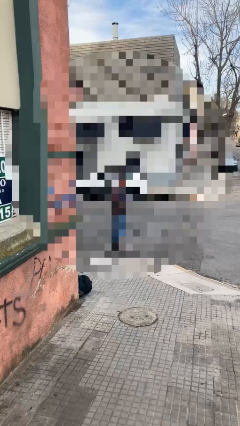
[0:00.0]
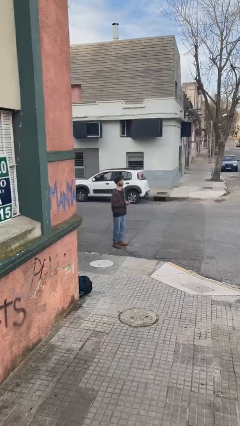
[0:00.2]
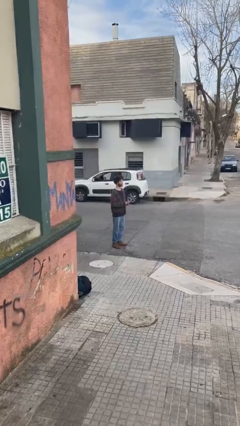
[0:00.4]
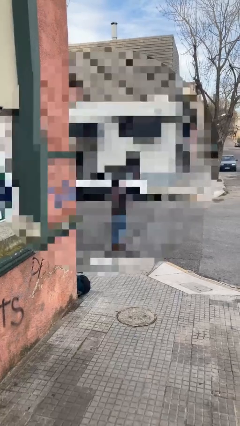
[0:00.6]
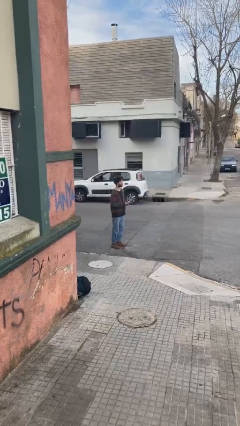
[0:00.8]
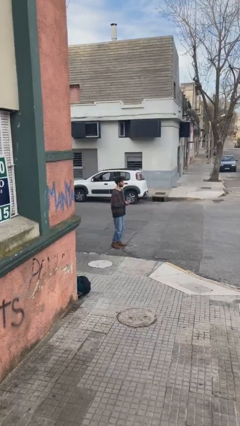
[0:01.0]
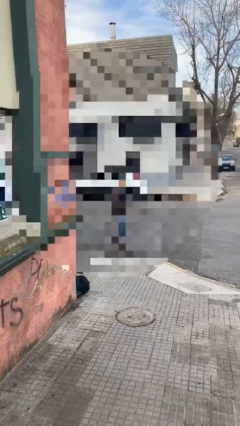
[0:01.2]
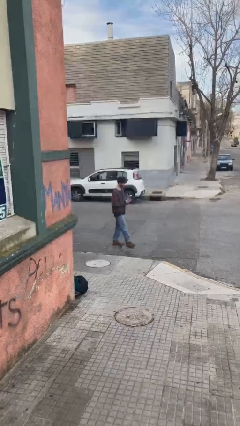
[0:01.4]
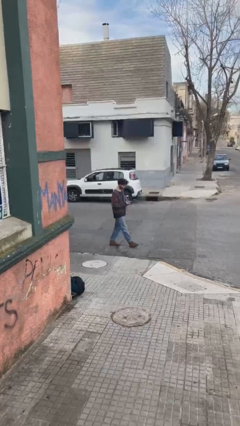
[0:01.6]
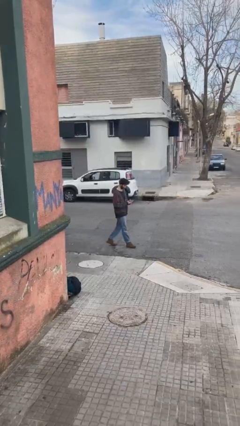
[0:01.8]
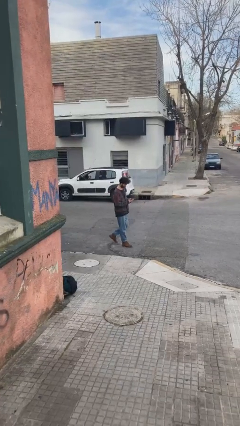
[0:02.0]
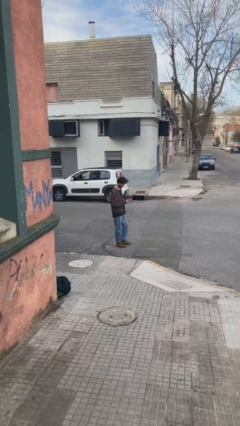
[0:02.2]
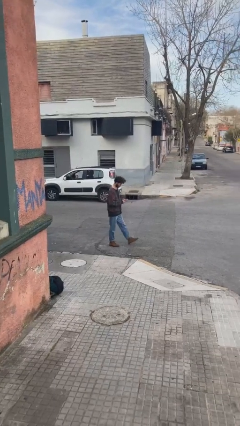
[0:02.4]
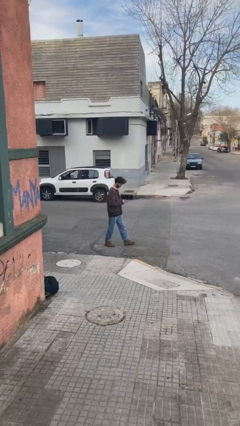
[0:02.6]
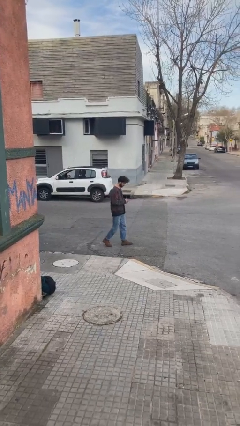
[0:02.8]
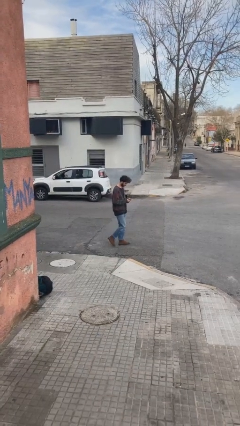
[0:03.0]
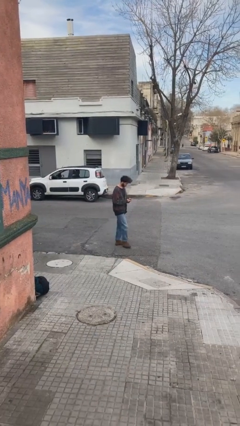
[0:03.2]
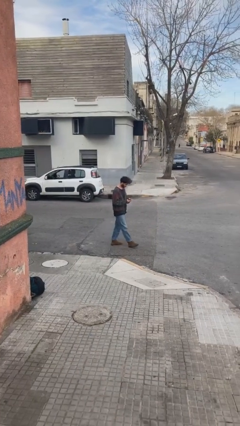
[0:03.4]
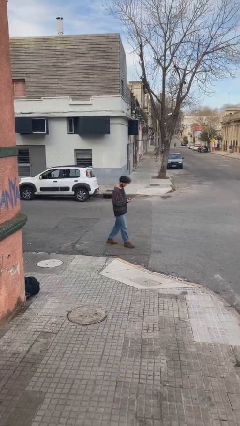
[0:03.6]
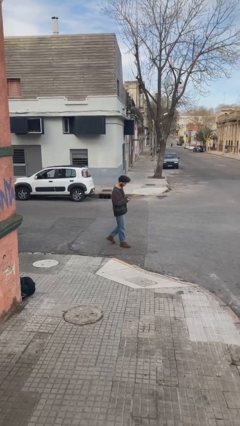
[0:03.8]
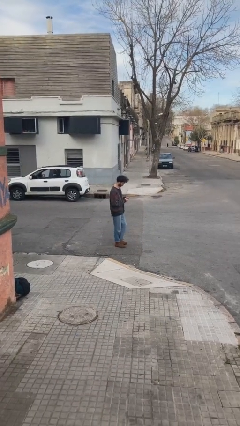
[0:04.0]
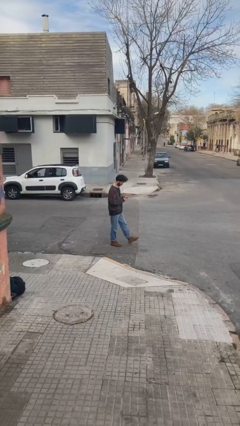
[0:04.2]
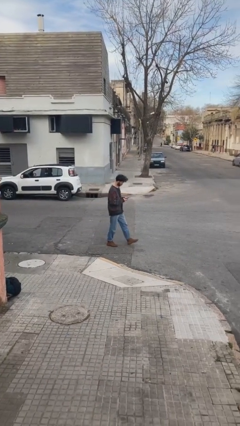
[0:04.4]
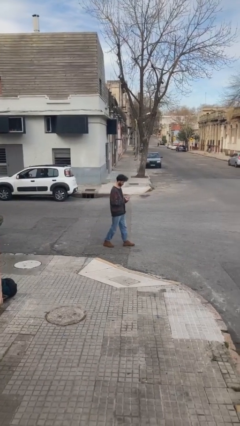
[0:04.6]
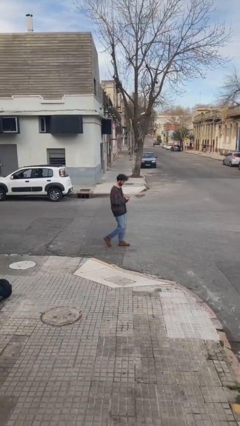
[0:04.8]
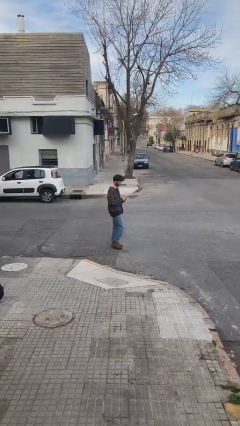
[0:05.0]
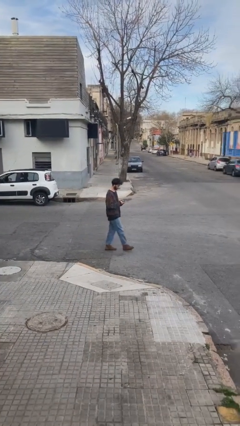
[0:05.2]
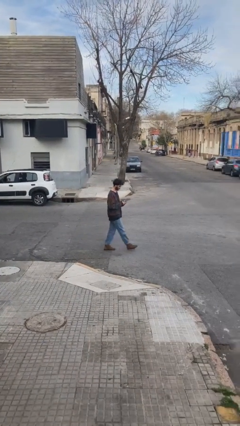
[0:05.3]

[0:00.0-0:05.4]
person texts on phone

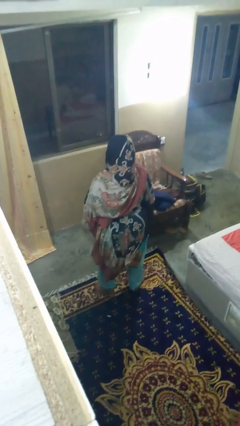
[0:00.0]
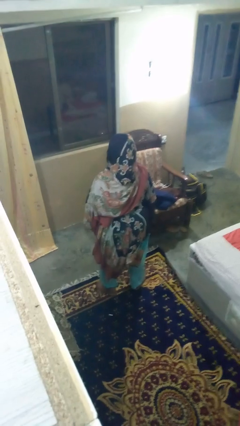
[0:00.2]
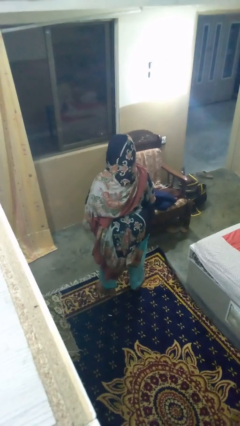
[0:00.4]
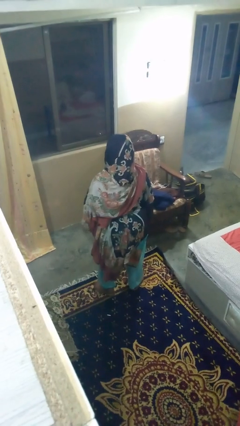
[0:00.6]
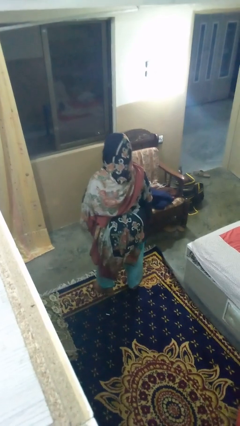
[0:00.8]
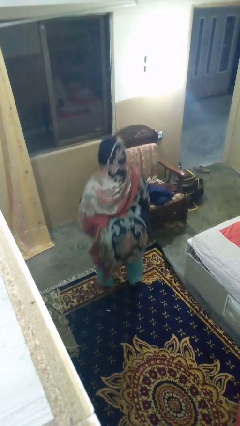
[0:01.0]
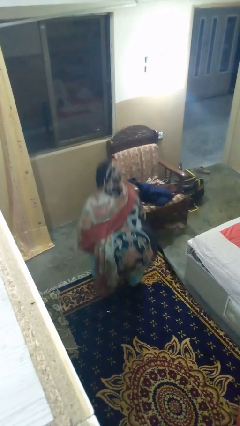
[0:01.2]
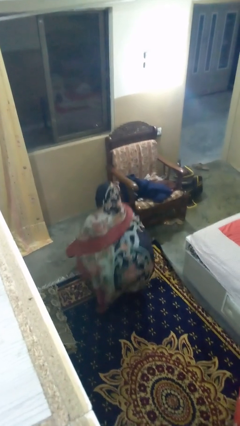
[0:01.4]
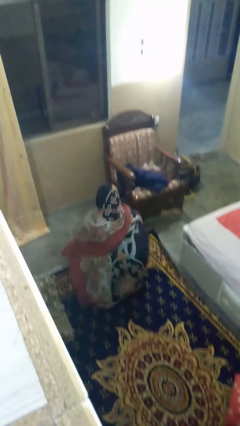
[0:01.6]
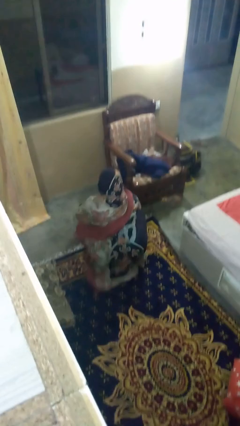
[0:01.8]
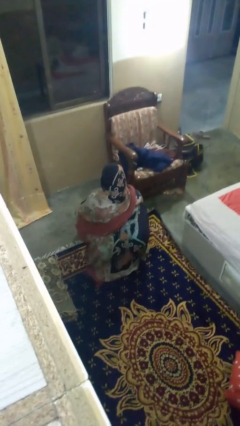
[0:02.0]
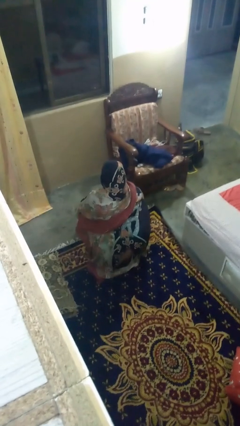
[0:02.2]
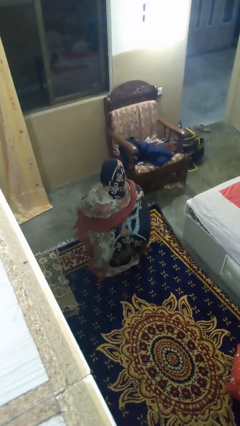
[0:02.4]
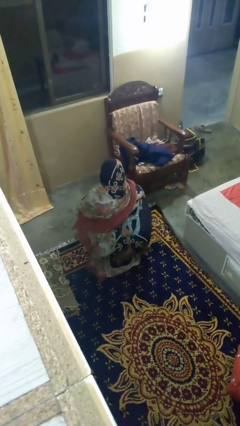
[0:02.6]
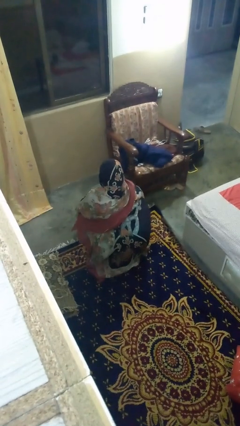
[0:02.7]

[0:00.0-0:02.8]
person squats

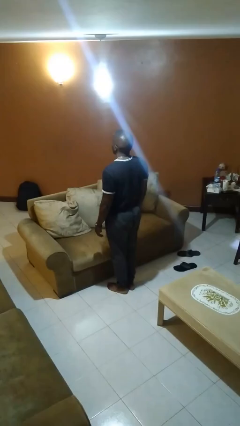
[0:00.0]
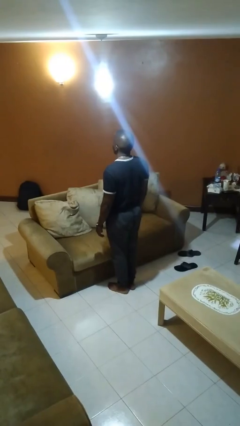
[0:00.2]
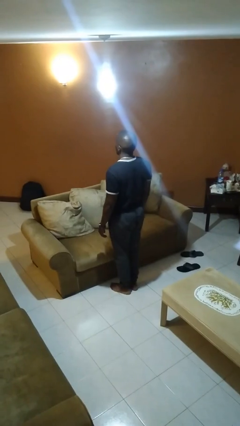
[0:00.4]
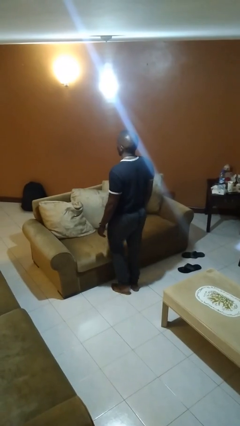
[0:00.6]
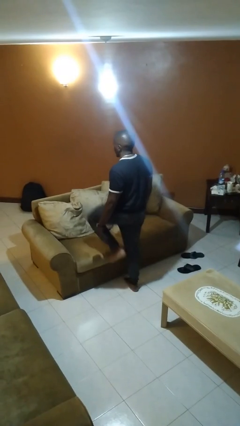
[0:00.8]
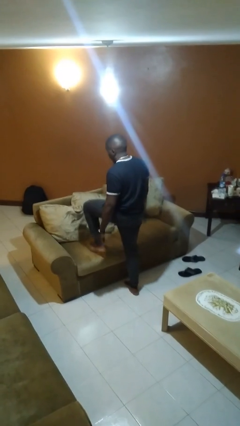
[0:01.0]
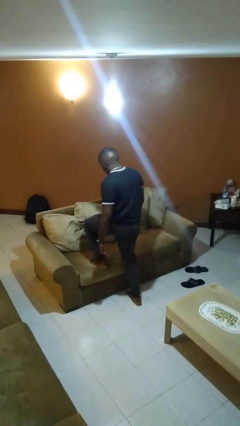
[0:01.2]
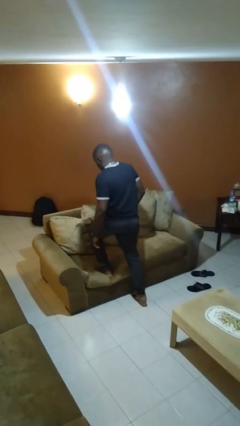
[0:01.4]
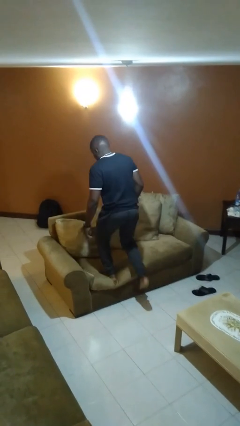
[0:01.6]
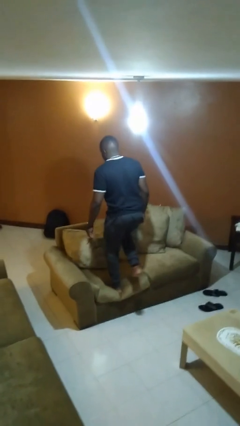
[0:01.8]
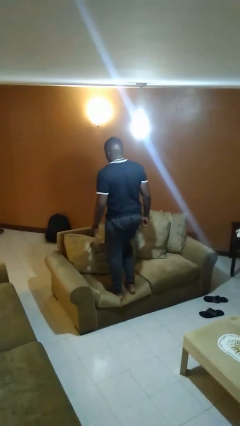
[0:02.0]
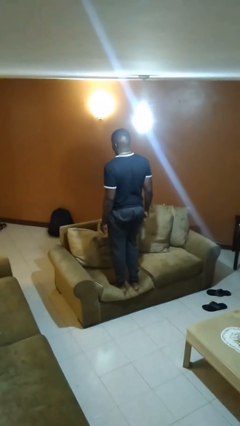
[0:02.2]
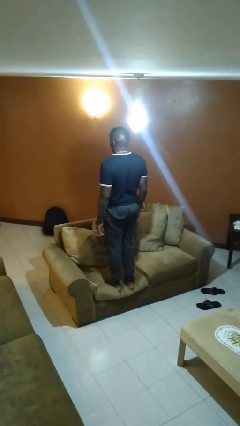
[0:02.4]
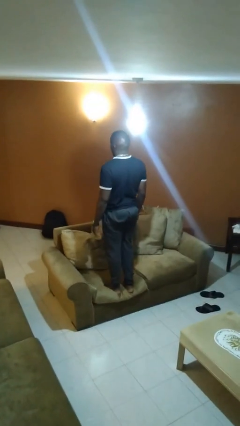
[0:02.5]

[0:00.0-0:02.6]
person climbs on couch

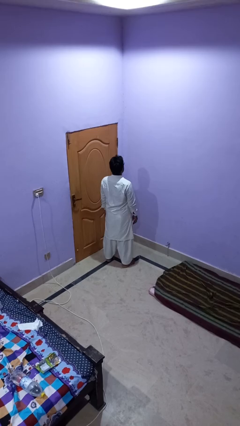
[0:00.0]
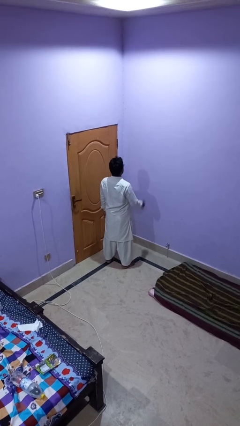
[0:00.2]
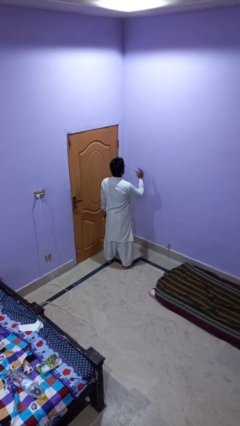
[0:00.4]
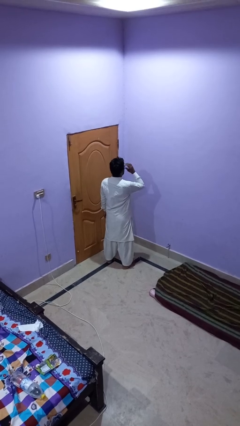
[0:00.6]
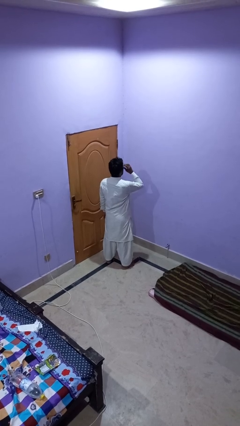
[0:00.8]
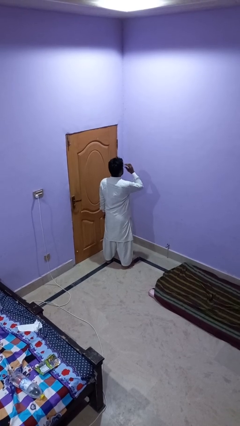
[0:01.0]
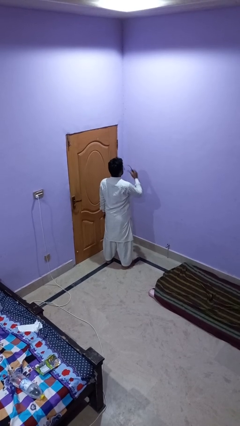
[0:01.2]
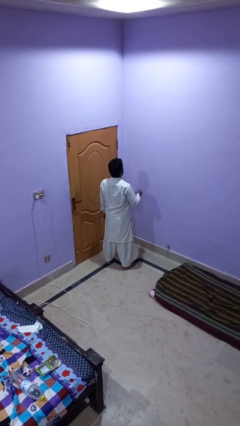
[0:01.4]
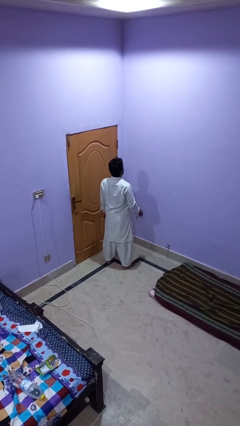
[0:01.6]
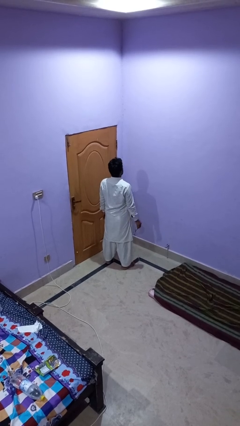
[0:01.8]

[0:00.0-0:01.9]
person takes off glasses

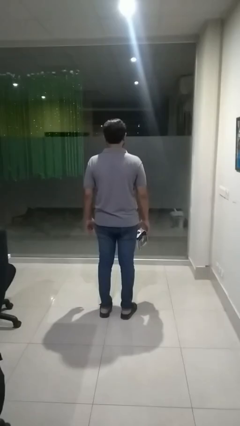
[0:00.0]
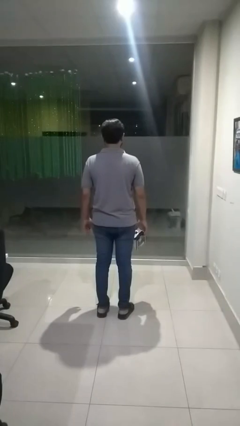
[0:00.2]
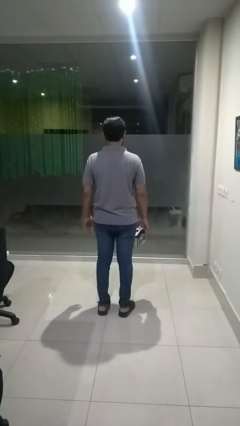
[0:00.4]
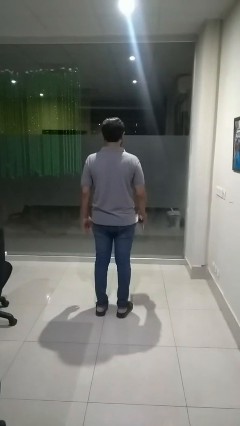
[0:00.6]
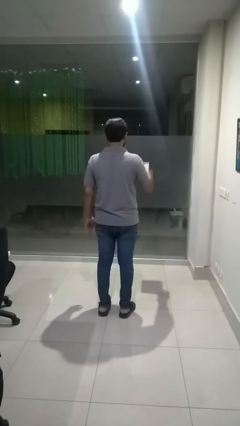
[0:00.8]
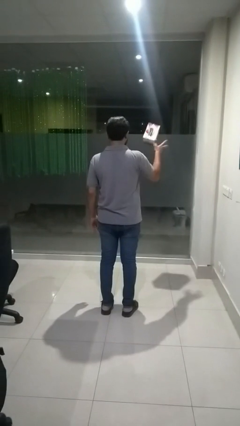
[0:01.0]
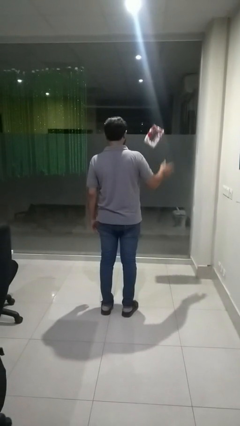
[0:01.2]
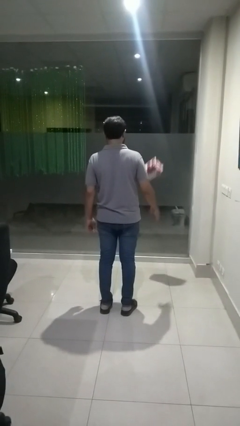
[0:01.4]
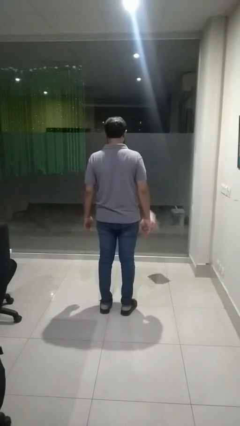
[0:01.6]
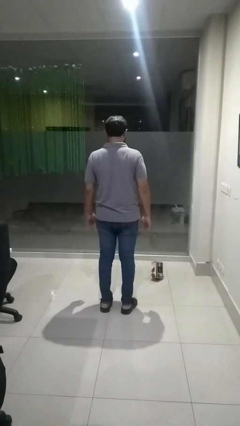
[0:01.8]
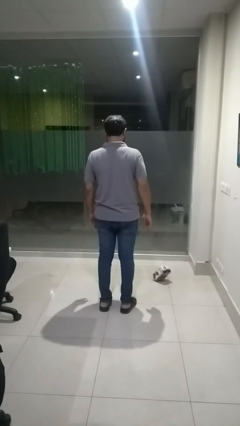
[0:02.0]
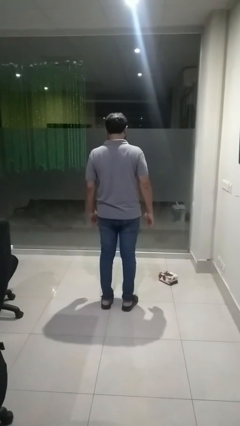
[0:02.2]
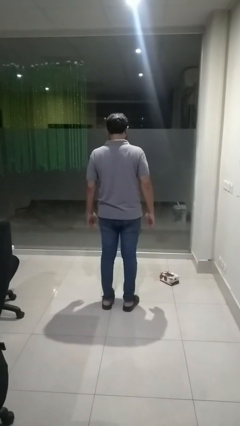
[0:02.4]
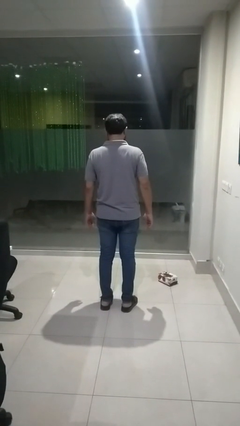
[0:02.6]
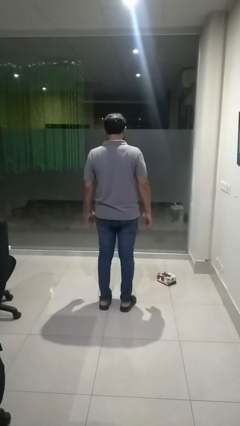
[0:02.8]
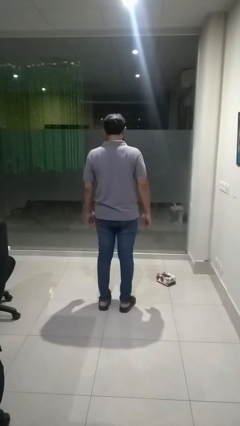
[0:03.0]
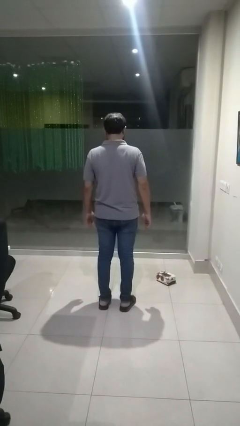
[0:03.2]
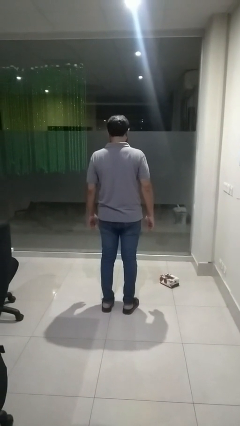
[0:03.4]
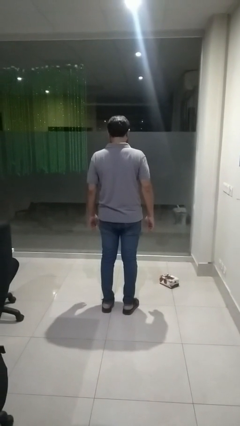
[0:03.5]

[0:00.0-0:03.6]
person throws object into air

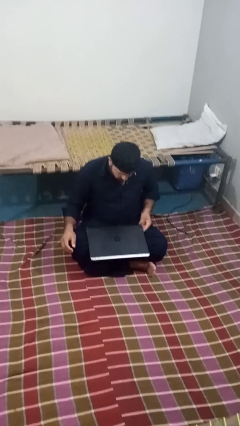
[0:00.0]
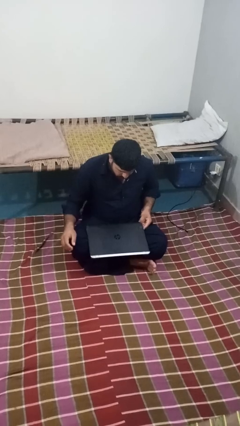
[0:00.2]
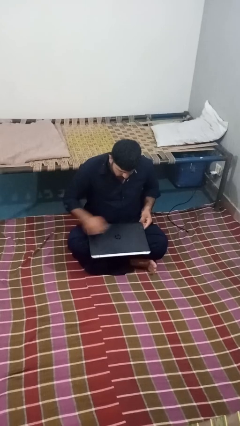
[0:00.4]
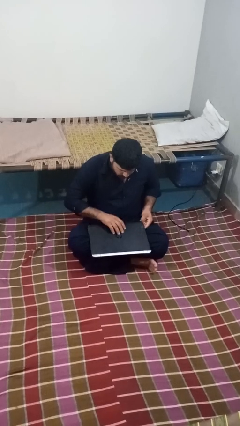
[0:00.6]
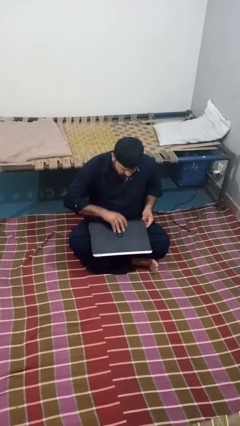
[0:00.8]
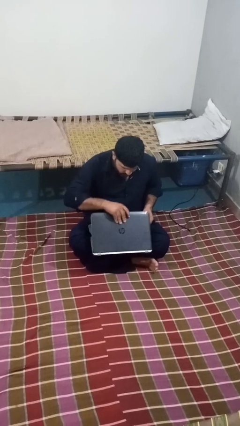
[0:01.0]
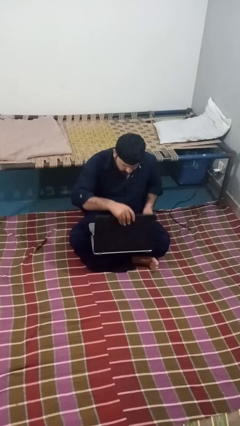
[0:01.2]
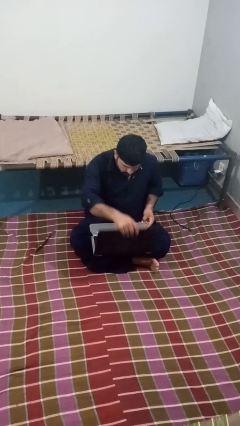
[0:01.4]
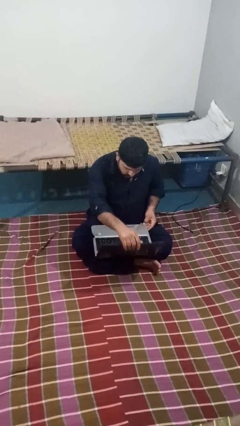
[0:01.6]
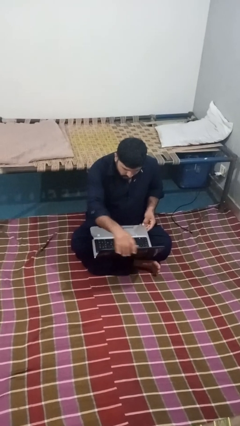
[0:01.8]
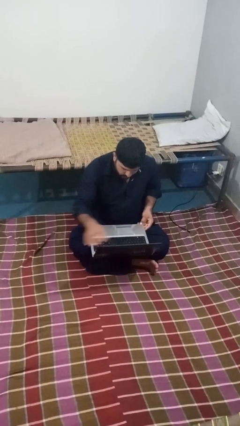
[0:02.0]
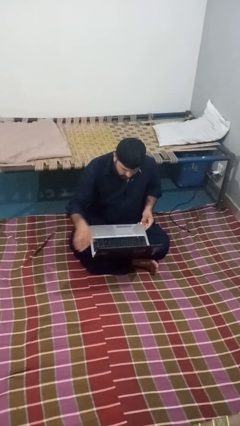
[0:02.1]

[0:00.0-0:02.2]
person opens laptop
